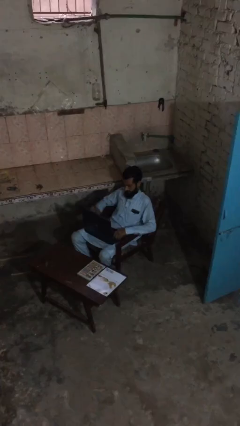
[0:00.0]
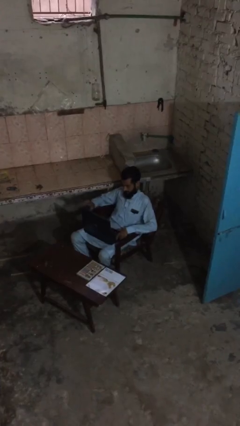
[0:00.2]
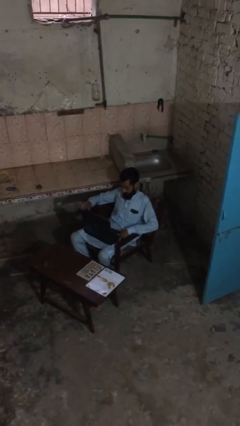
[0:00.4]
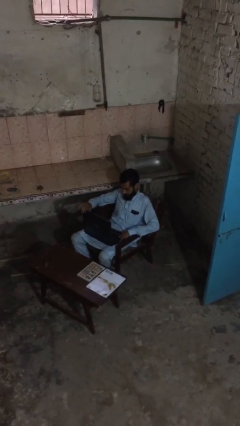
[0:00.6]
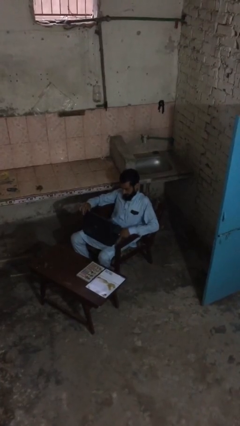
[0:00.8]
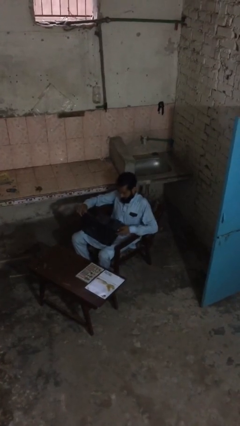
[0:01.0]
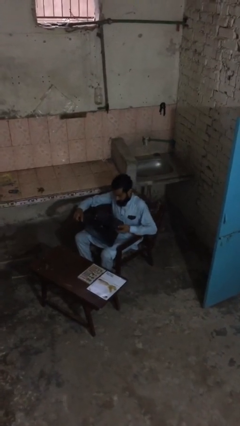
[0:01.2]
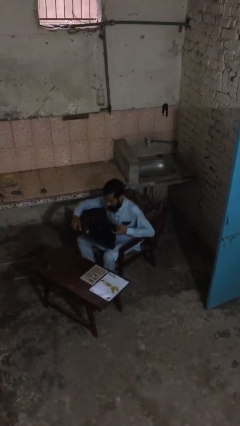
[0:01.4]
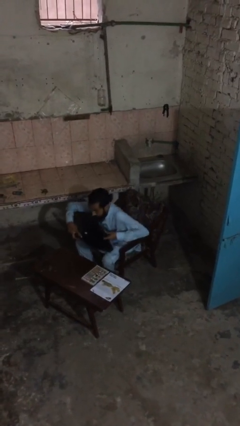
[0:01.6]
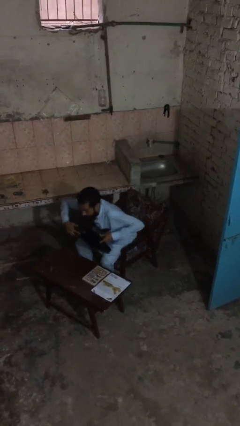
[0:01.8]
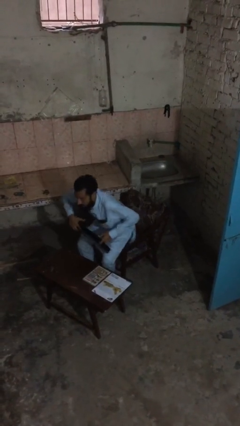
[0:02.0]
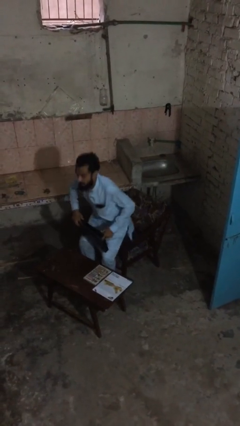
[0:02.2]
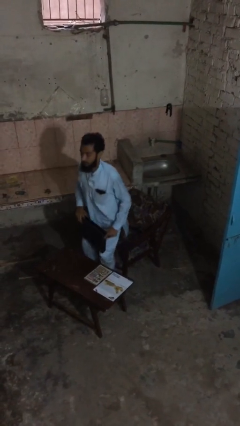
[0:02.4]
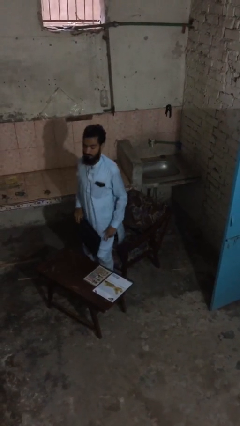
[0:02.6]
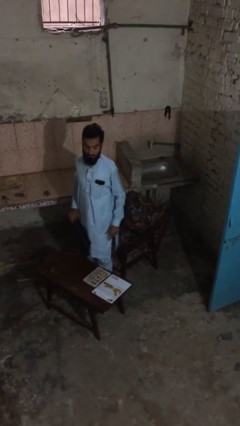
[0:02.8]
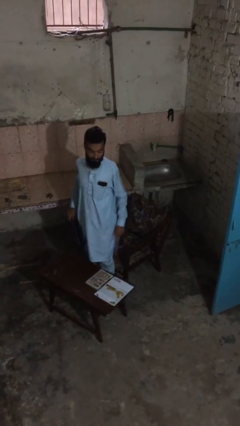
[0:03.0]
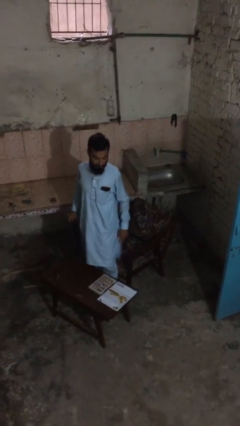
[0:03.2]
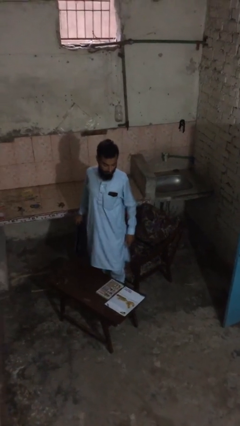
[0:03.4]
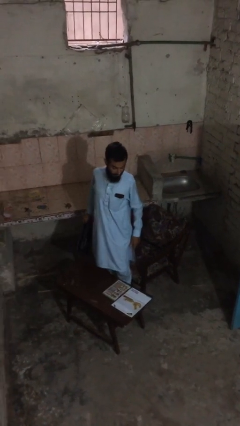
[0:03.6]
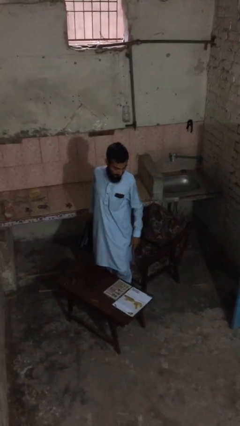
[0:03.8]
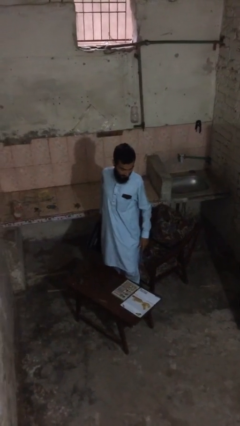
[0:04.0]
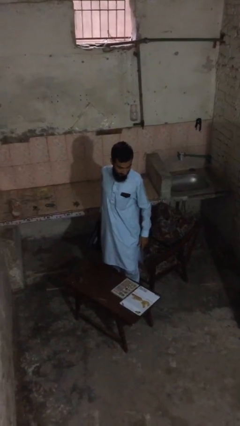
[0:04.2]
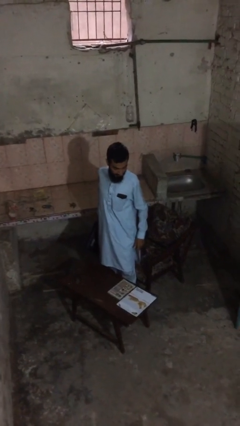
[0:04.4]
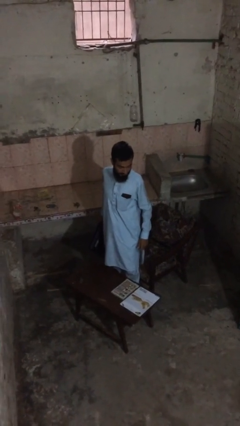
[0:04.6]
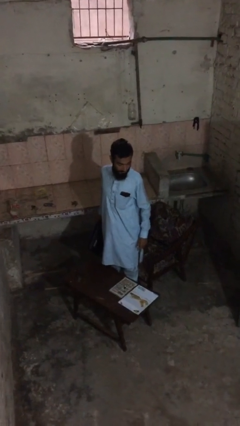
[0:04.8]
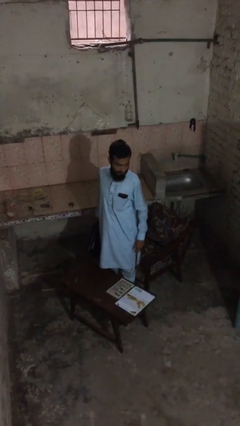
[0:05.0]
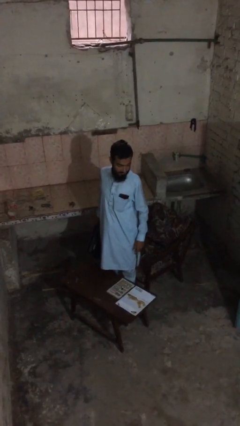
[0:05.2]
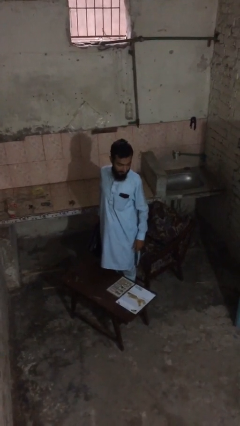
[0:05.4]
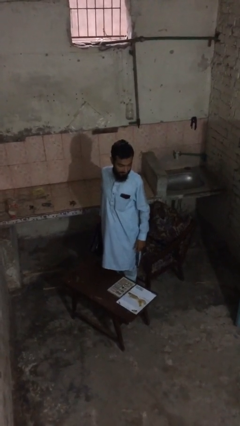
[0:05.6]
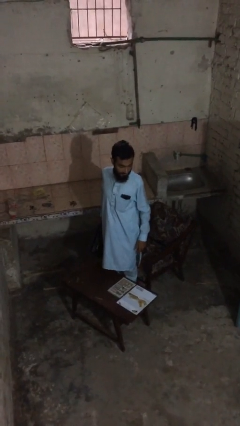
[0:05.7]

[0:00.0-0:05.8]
person stands up

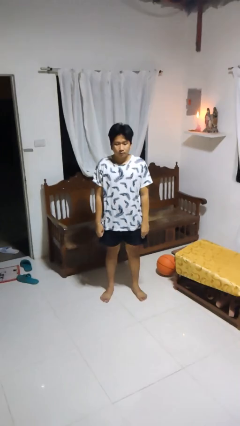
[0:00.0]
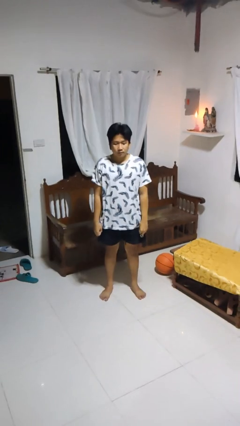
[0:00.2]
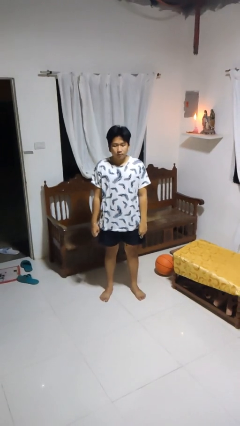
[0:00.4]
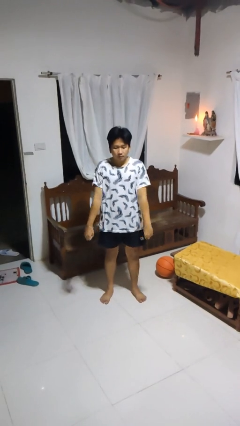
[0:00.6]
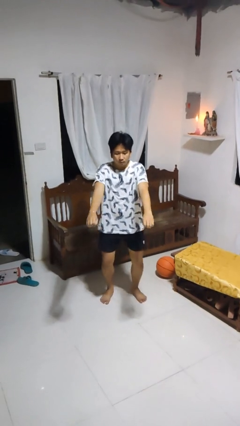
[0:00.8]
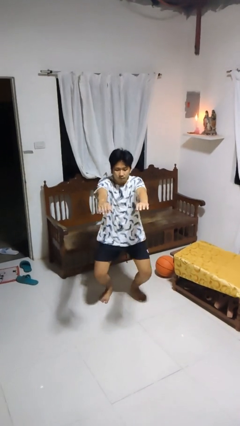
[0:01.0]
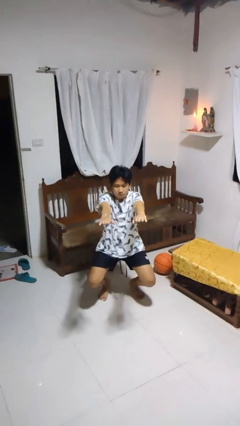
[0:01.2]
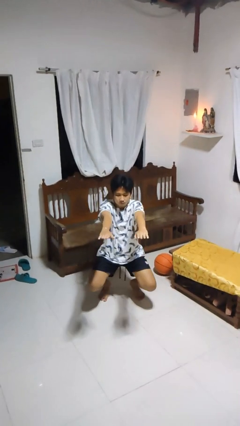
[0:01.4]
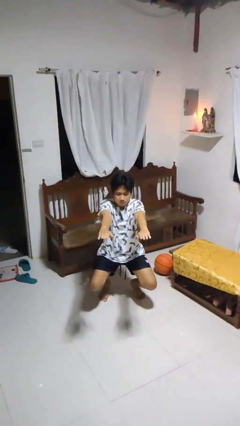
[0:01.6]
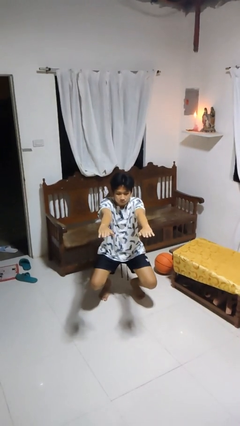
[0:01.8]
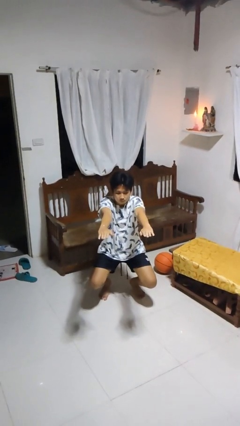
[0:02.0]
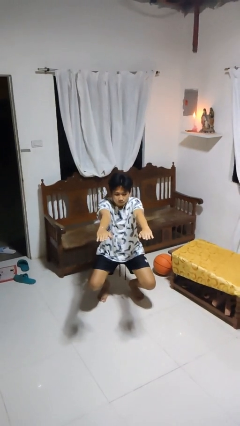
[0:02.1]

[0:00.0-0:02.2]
person squats

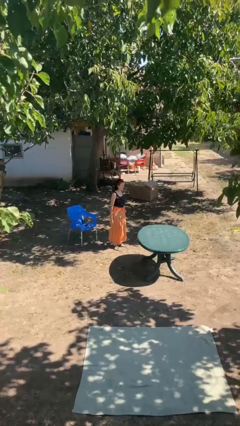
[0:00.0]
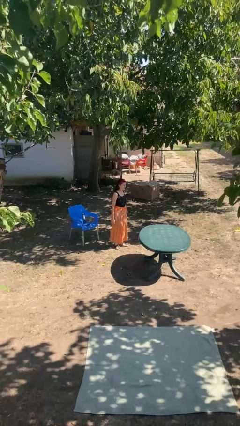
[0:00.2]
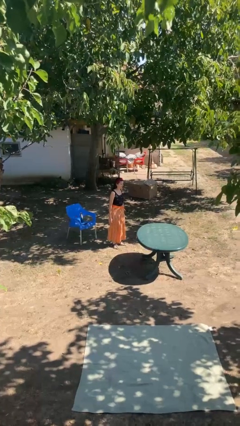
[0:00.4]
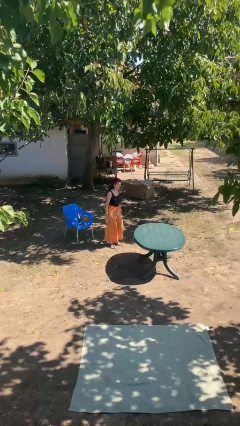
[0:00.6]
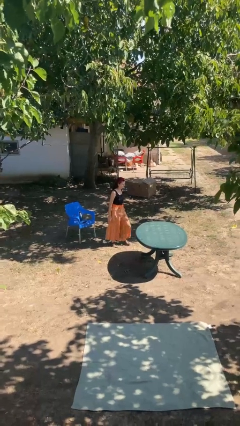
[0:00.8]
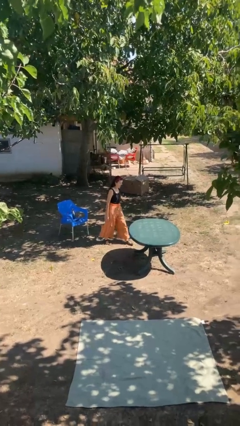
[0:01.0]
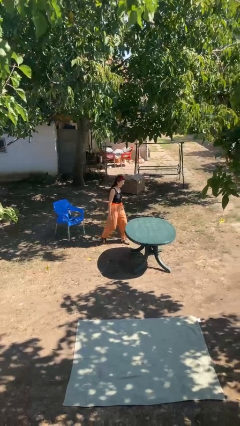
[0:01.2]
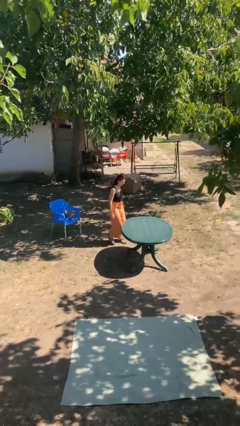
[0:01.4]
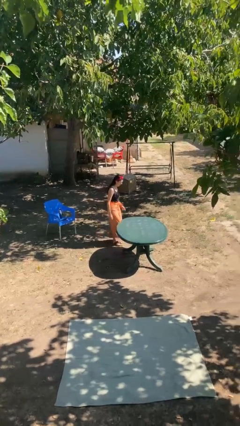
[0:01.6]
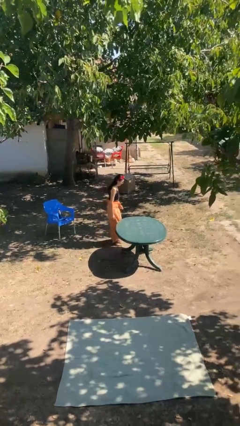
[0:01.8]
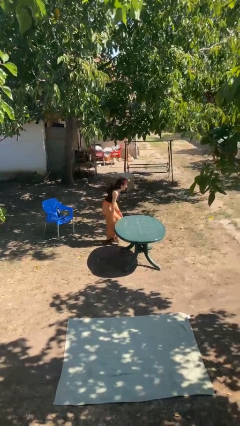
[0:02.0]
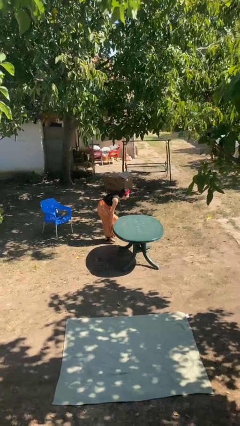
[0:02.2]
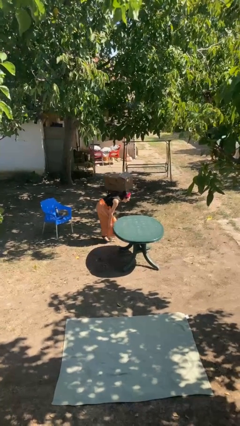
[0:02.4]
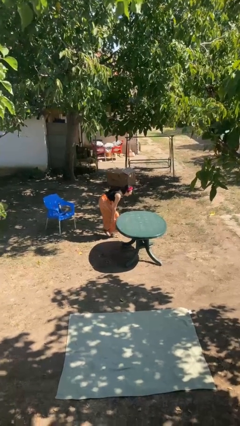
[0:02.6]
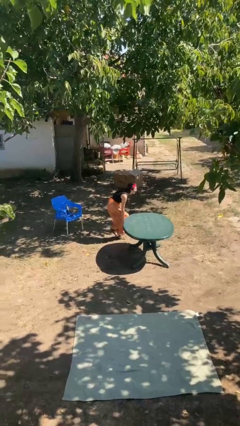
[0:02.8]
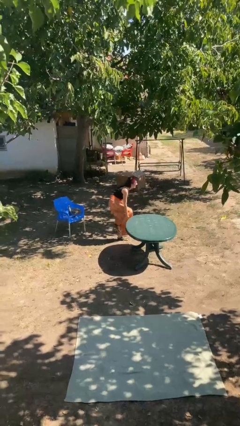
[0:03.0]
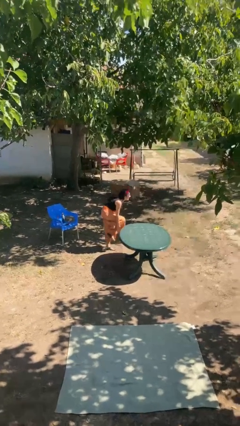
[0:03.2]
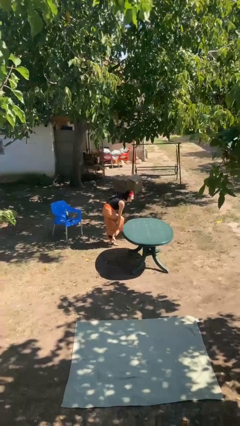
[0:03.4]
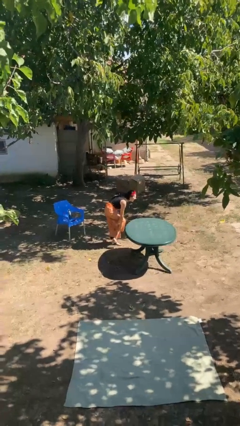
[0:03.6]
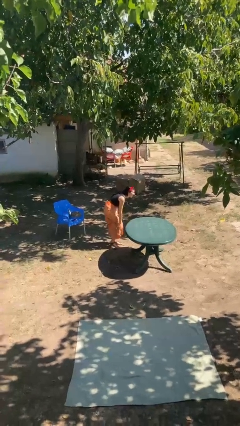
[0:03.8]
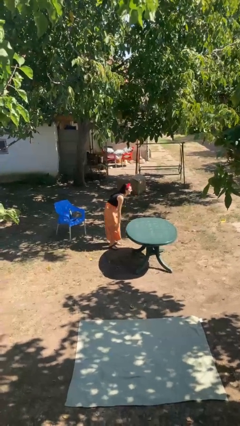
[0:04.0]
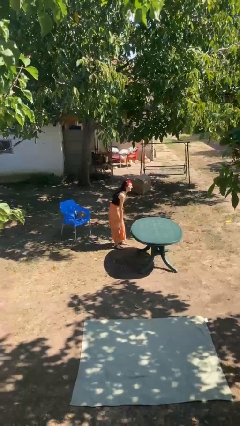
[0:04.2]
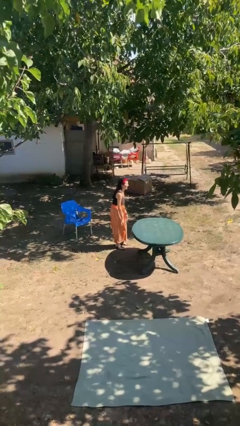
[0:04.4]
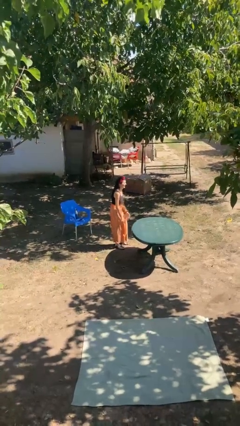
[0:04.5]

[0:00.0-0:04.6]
person bumps into table

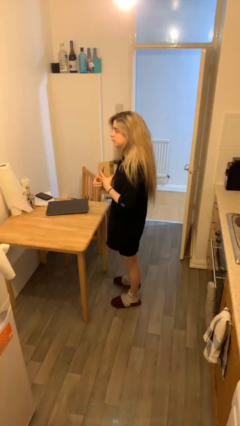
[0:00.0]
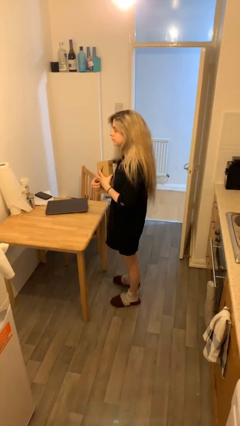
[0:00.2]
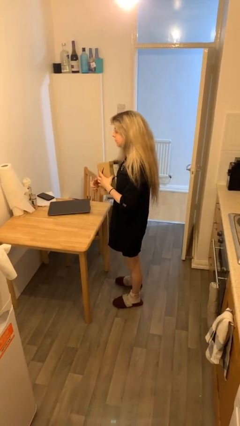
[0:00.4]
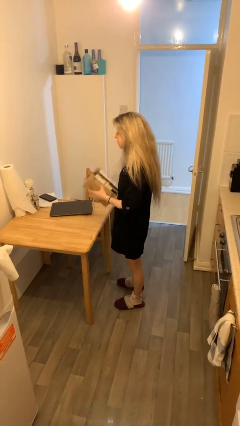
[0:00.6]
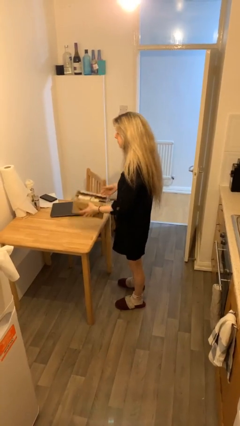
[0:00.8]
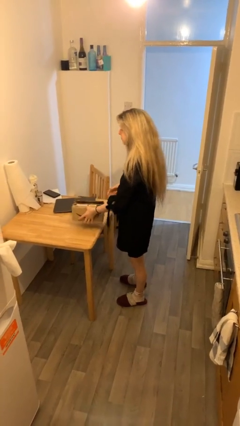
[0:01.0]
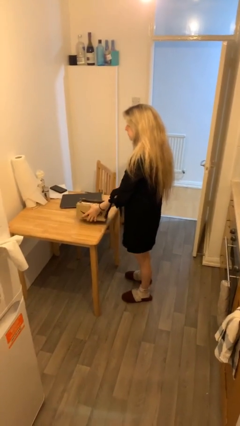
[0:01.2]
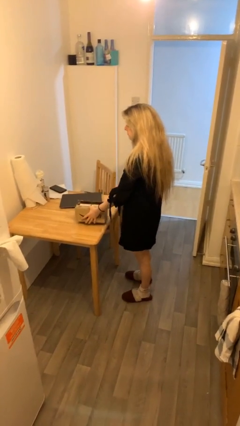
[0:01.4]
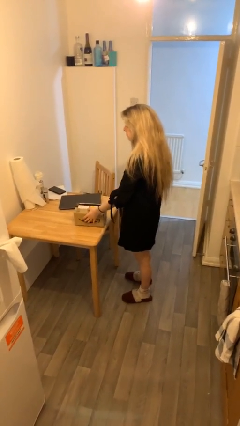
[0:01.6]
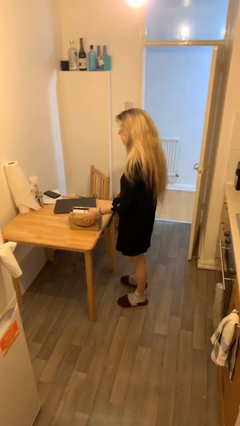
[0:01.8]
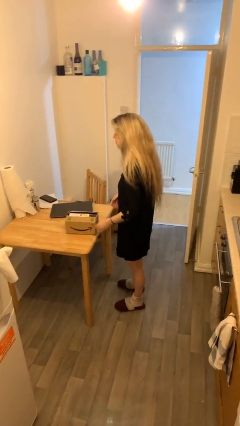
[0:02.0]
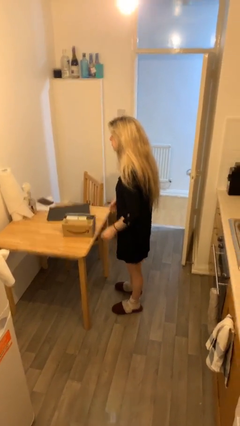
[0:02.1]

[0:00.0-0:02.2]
person puts down object on table

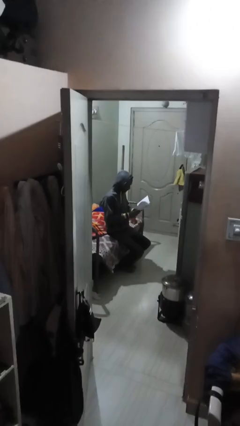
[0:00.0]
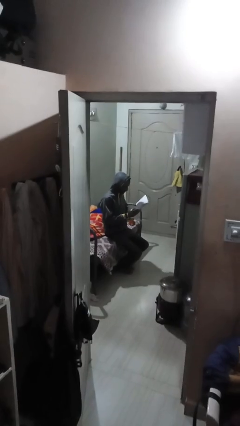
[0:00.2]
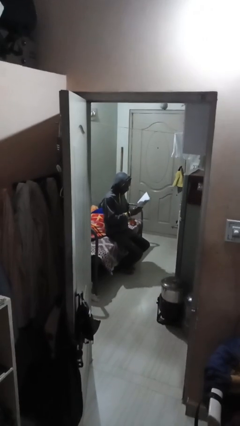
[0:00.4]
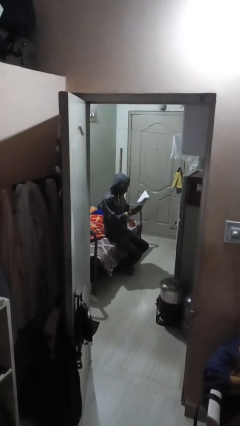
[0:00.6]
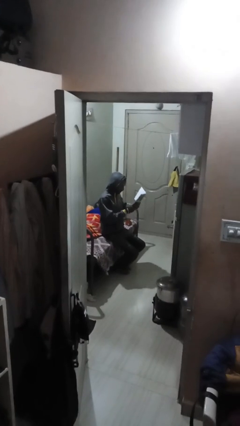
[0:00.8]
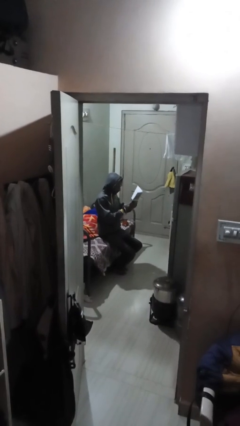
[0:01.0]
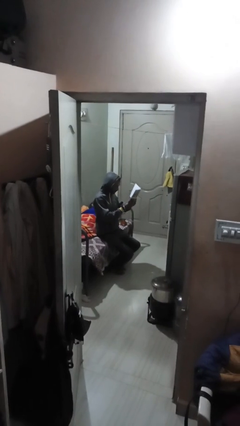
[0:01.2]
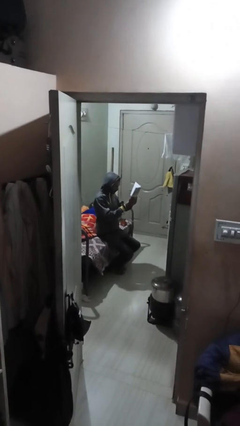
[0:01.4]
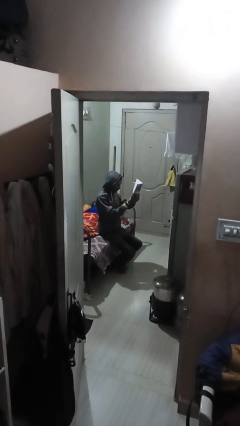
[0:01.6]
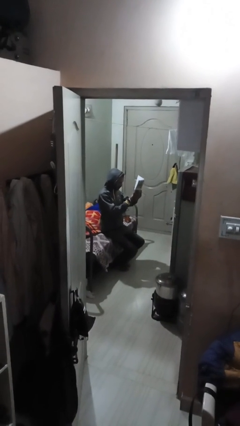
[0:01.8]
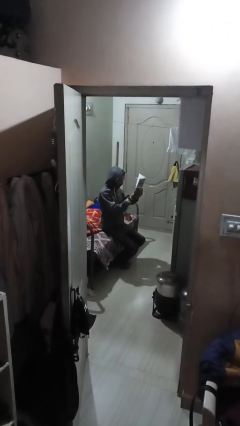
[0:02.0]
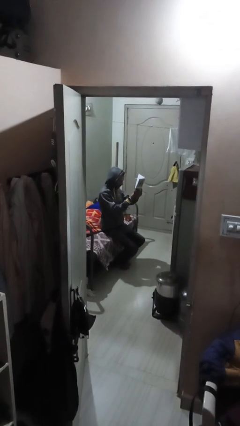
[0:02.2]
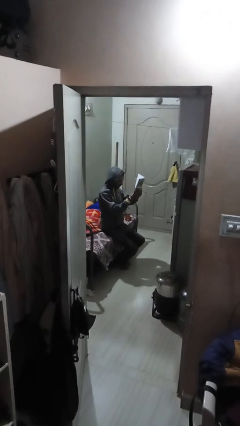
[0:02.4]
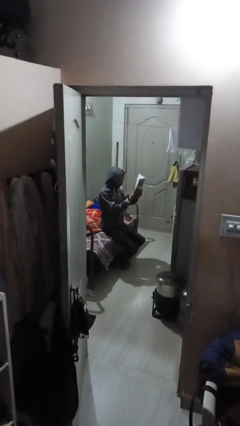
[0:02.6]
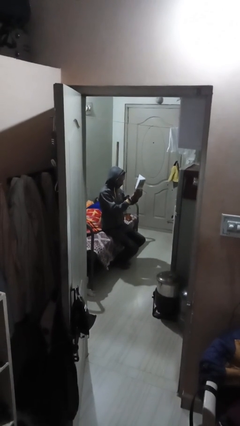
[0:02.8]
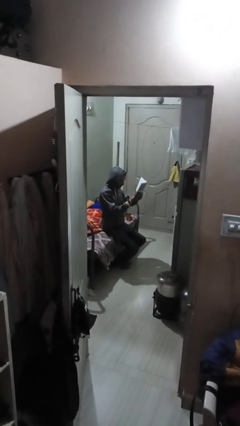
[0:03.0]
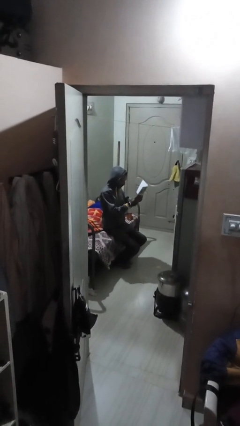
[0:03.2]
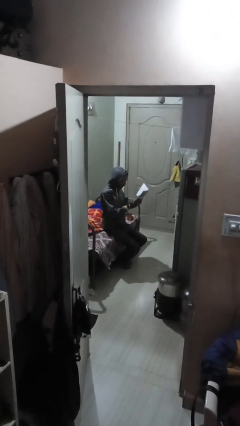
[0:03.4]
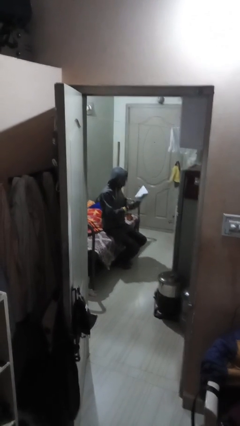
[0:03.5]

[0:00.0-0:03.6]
person reads document
